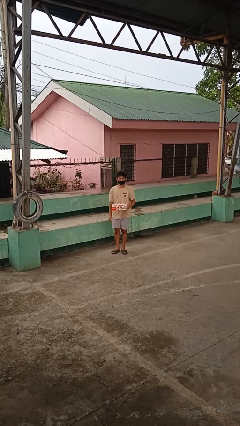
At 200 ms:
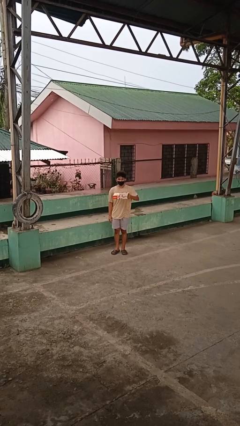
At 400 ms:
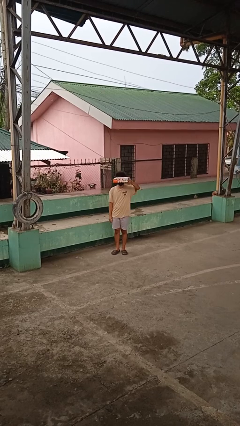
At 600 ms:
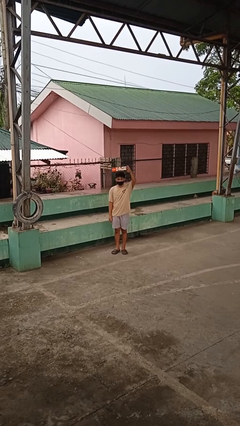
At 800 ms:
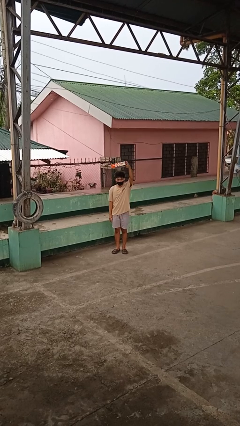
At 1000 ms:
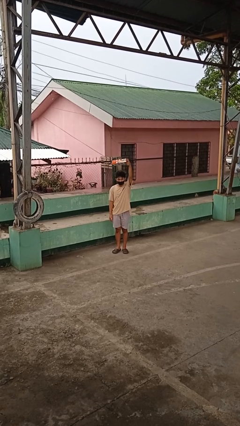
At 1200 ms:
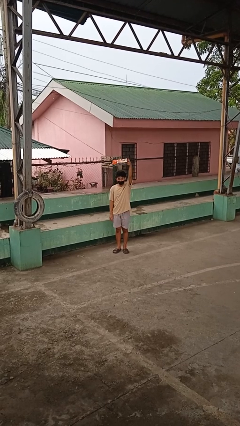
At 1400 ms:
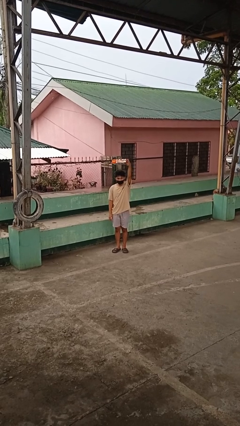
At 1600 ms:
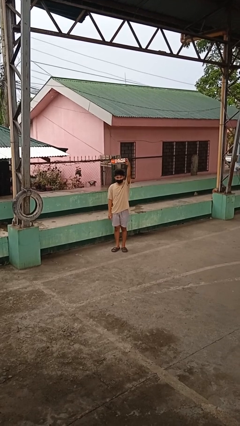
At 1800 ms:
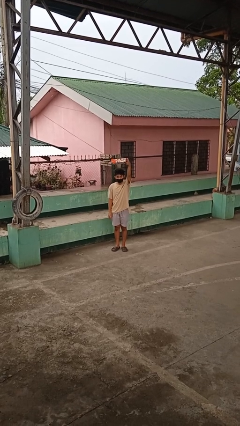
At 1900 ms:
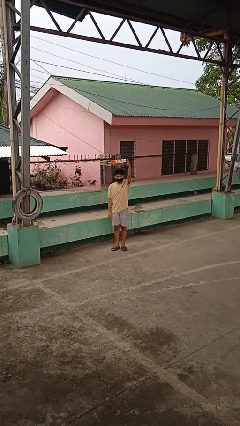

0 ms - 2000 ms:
person holds object above head

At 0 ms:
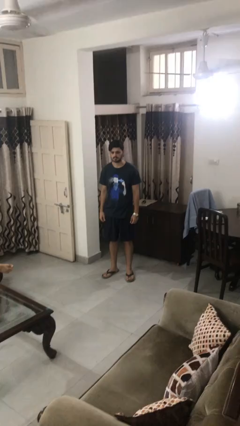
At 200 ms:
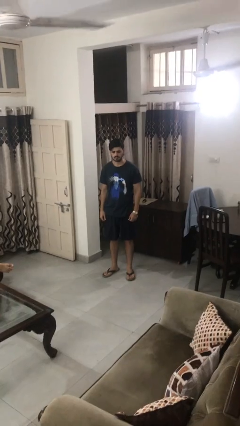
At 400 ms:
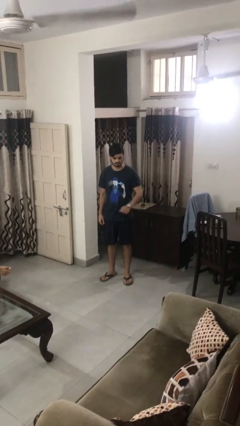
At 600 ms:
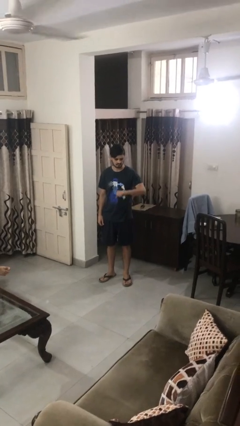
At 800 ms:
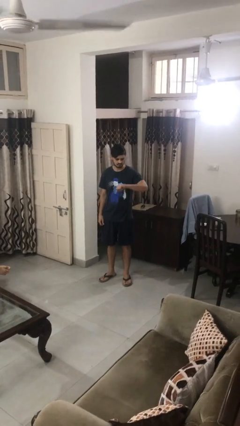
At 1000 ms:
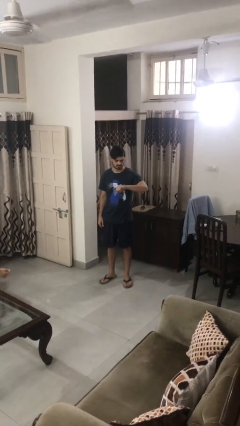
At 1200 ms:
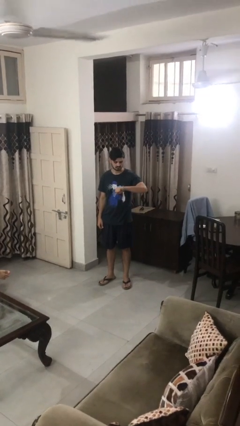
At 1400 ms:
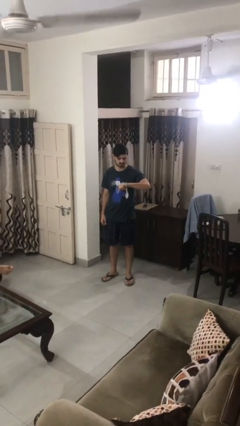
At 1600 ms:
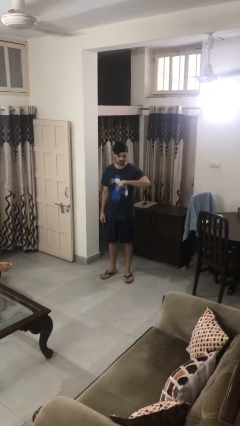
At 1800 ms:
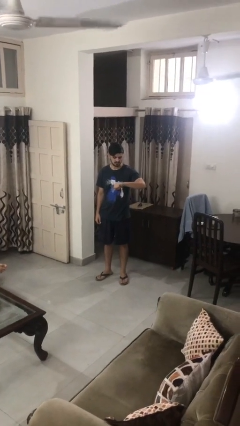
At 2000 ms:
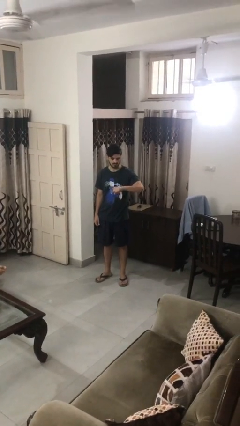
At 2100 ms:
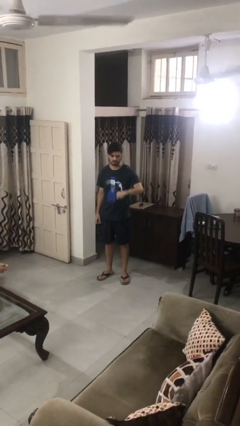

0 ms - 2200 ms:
person looks at wristwatch

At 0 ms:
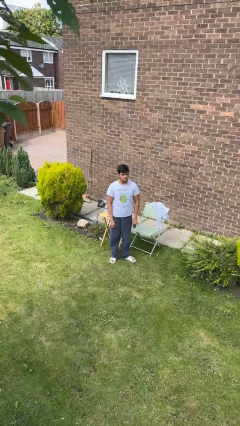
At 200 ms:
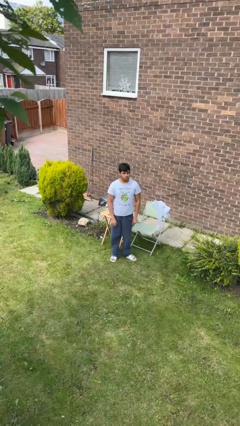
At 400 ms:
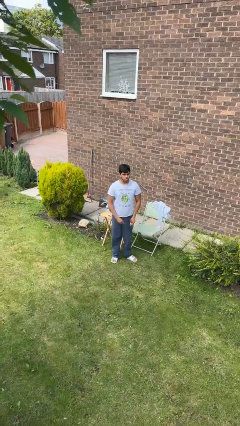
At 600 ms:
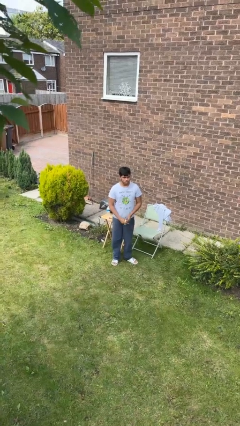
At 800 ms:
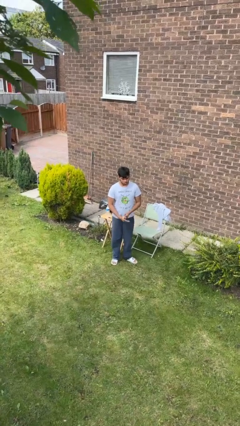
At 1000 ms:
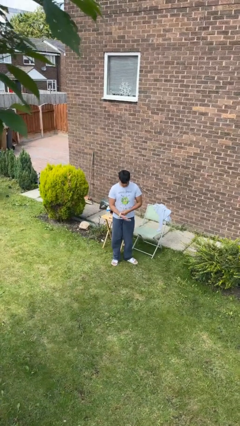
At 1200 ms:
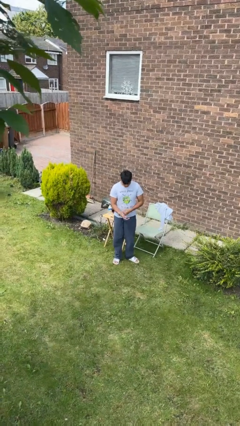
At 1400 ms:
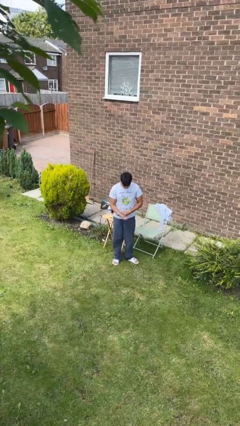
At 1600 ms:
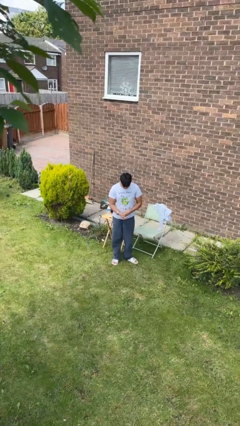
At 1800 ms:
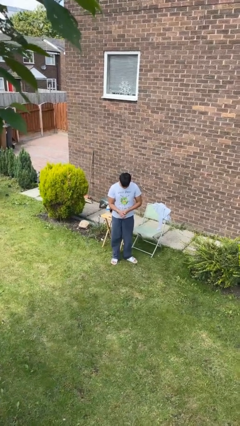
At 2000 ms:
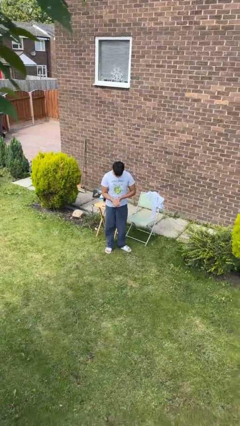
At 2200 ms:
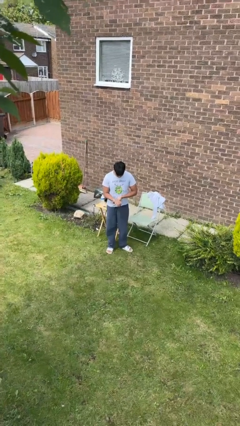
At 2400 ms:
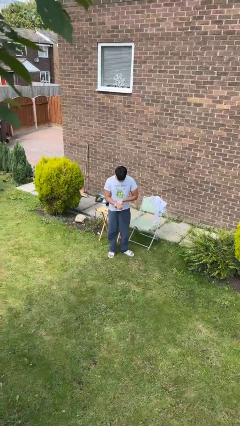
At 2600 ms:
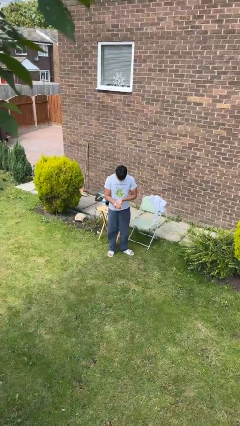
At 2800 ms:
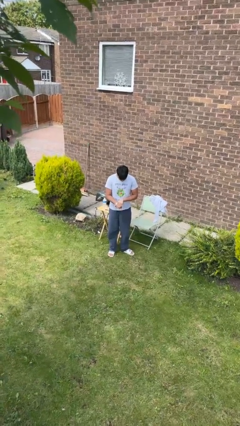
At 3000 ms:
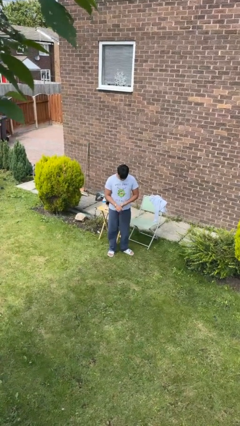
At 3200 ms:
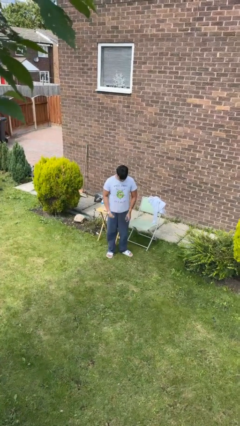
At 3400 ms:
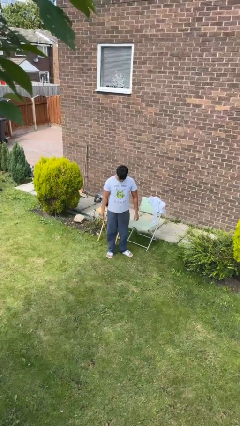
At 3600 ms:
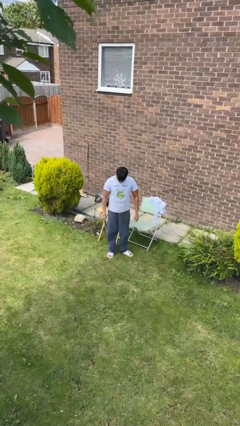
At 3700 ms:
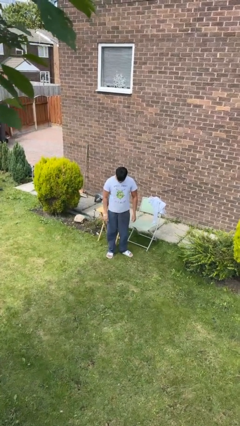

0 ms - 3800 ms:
person puts on wristwatch

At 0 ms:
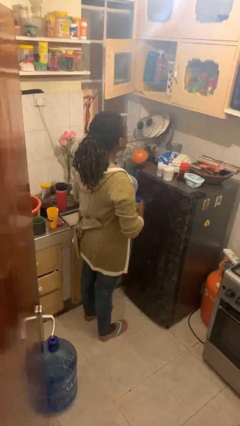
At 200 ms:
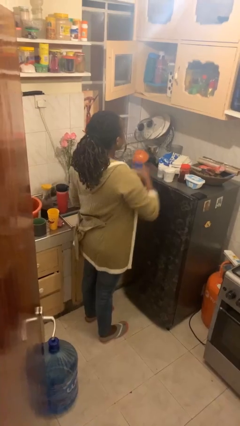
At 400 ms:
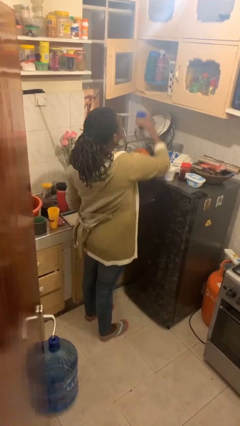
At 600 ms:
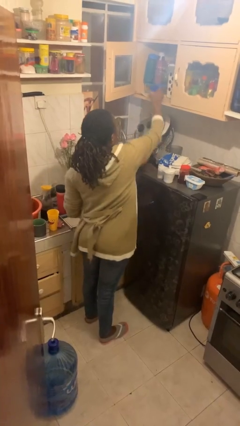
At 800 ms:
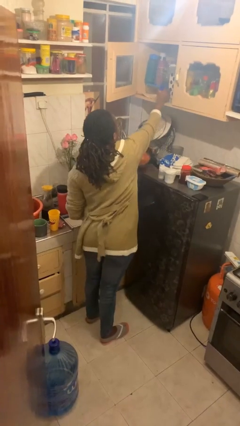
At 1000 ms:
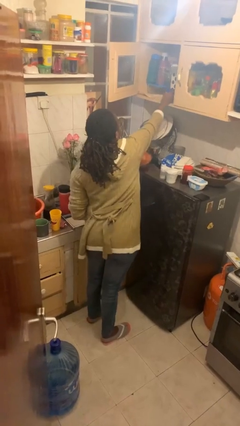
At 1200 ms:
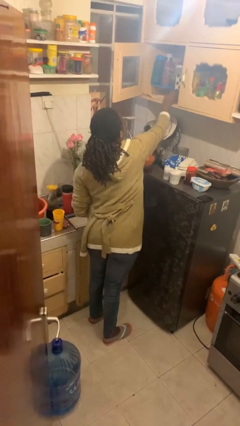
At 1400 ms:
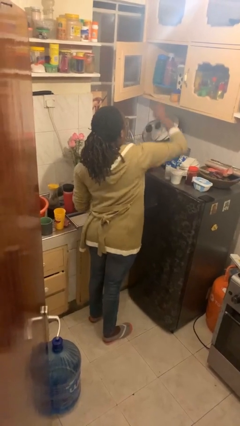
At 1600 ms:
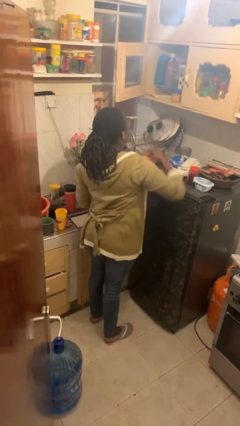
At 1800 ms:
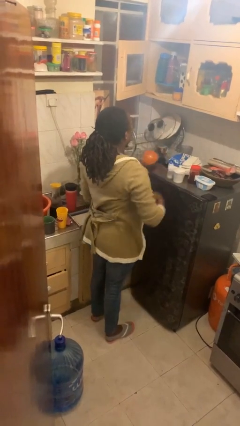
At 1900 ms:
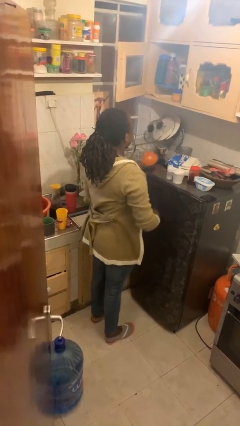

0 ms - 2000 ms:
person puts down object on countertop

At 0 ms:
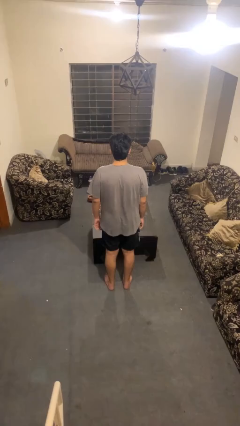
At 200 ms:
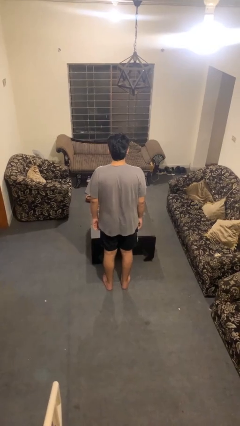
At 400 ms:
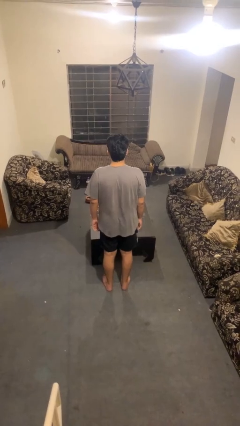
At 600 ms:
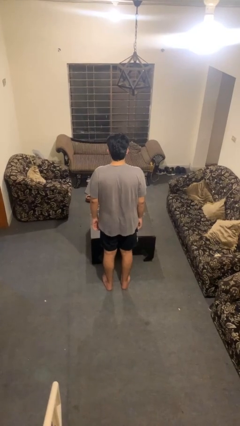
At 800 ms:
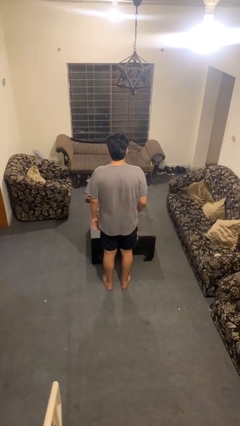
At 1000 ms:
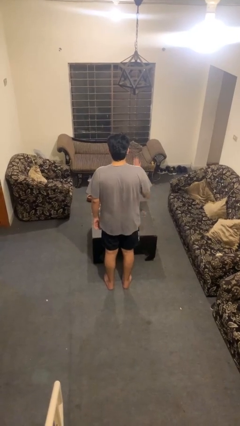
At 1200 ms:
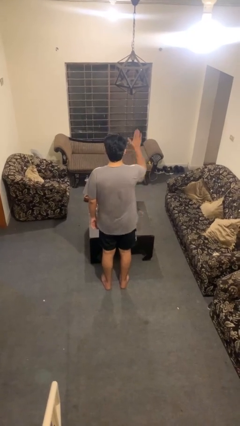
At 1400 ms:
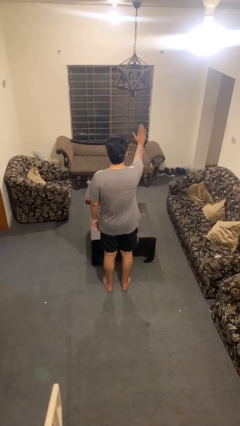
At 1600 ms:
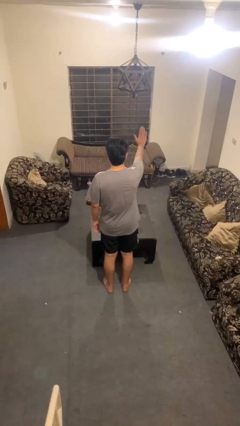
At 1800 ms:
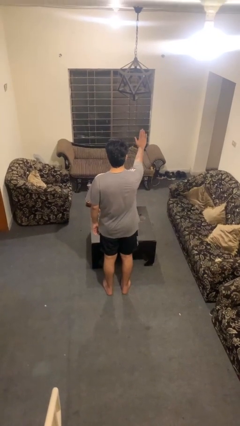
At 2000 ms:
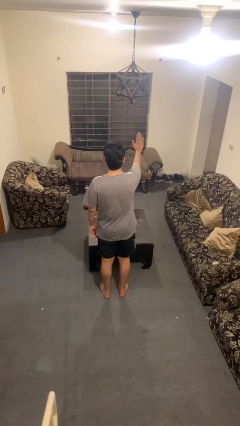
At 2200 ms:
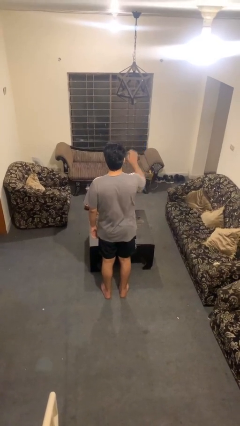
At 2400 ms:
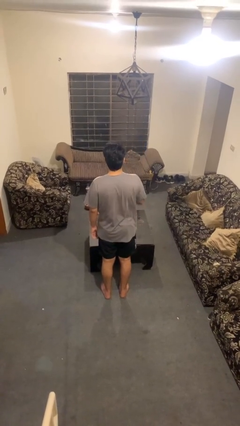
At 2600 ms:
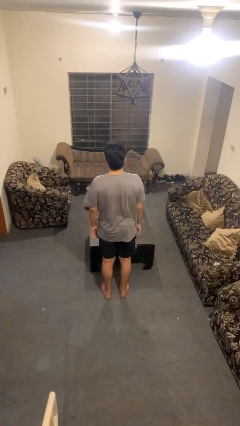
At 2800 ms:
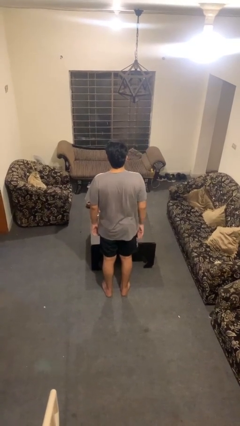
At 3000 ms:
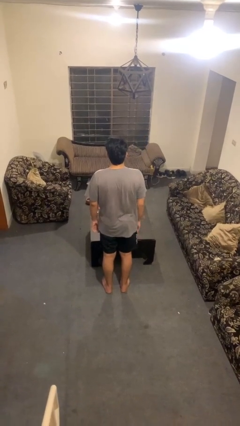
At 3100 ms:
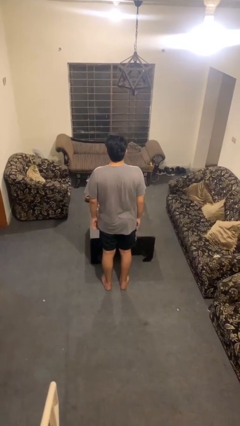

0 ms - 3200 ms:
person gestures stop

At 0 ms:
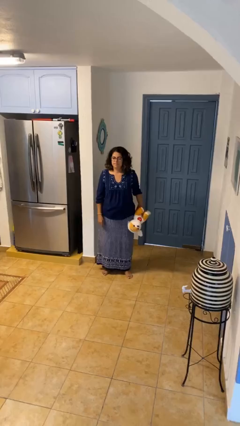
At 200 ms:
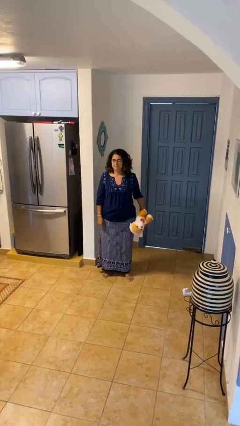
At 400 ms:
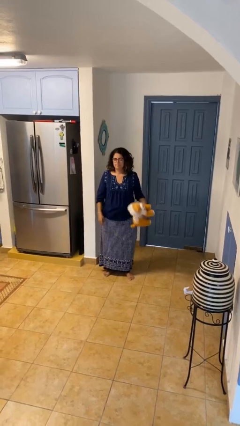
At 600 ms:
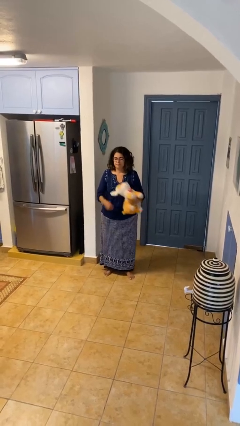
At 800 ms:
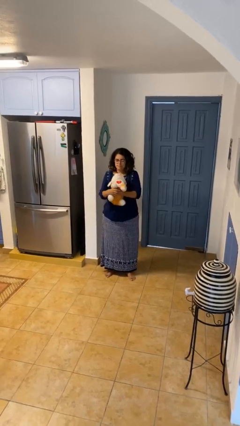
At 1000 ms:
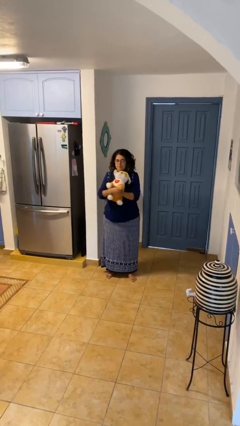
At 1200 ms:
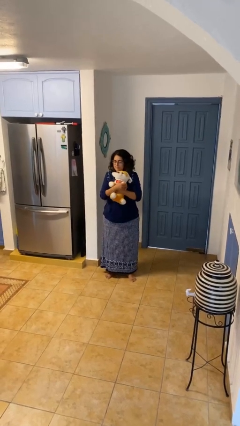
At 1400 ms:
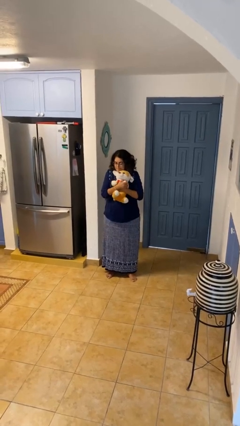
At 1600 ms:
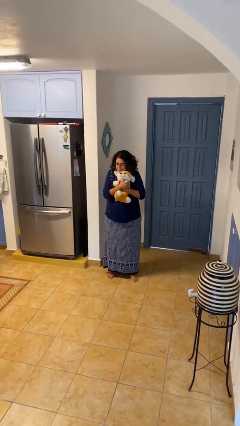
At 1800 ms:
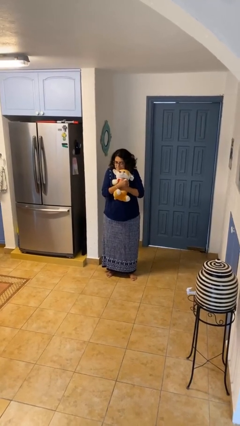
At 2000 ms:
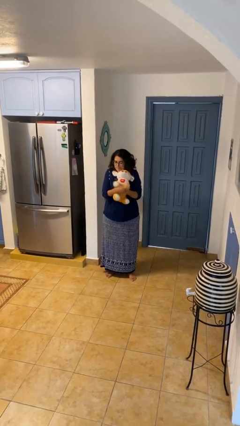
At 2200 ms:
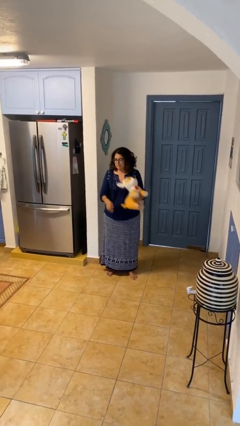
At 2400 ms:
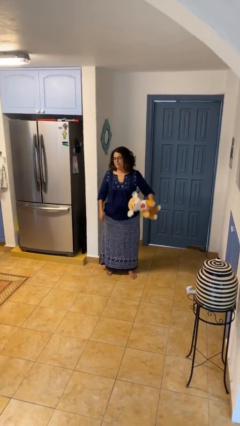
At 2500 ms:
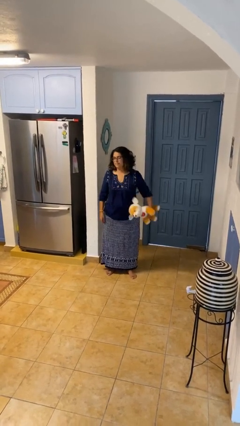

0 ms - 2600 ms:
person hugs stuffed animal

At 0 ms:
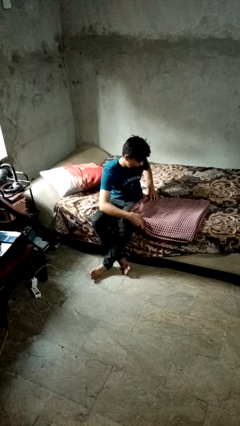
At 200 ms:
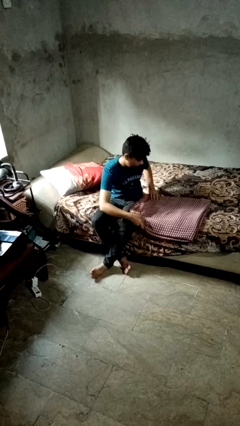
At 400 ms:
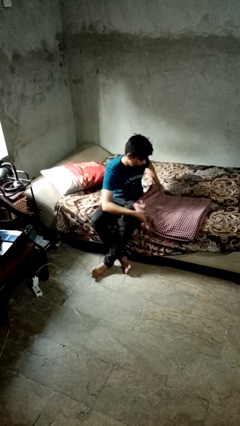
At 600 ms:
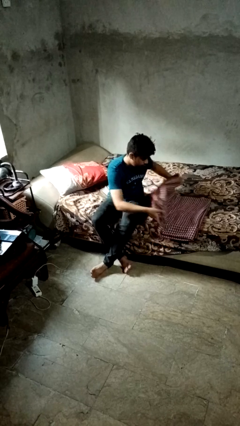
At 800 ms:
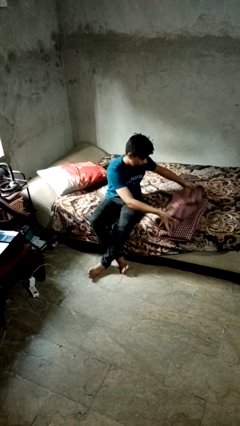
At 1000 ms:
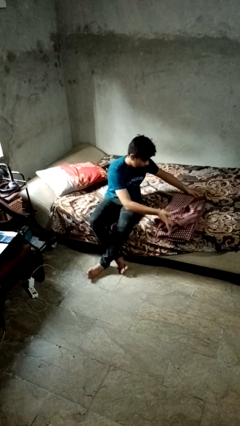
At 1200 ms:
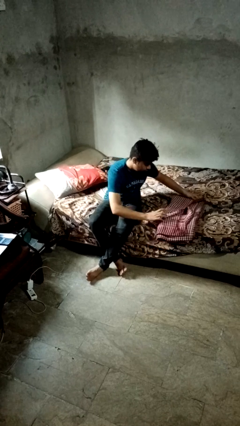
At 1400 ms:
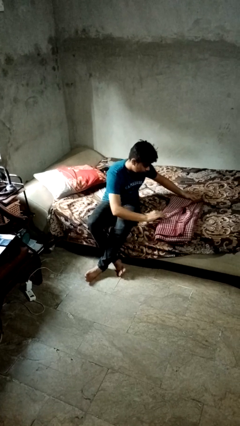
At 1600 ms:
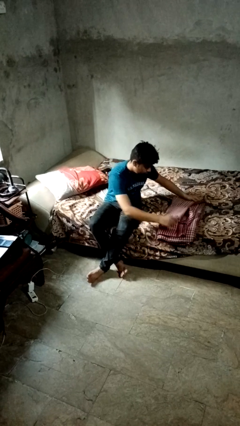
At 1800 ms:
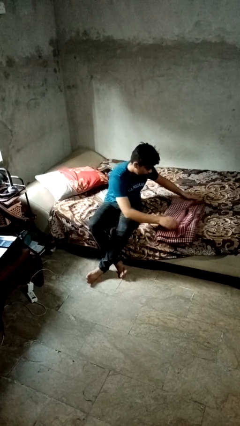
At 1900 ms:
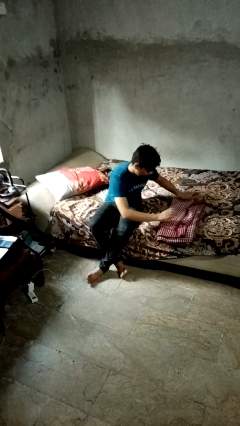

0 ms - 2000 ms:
person folds blanket
